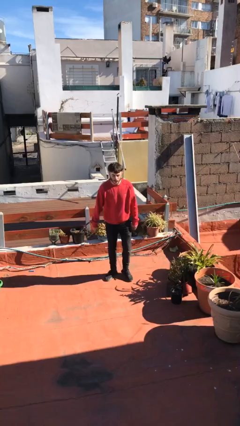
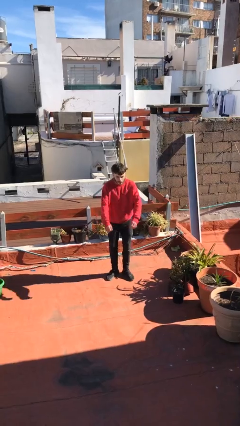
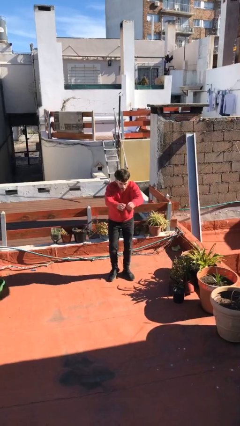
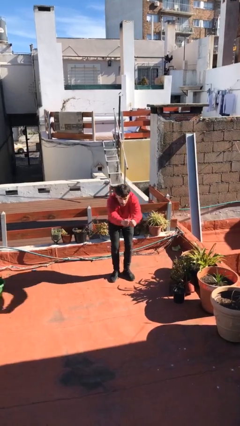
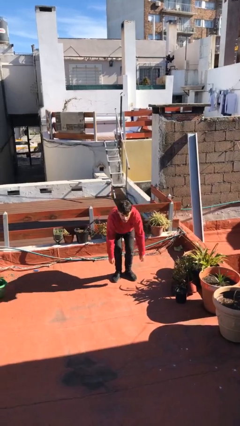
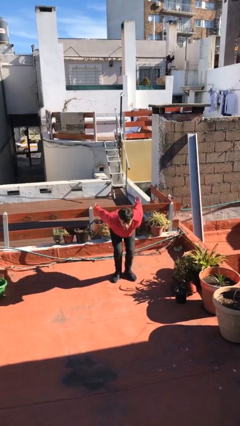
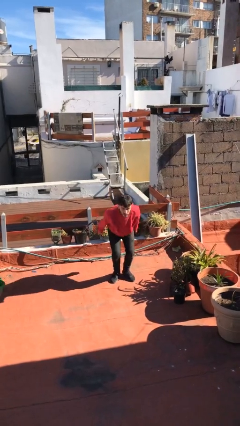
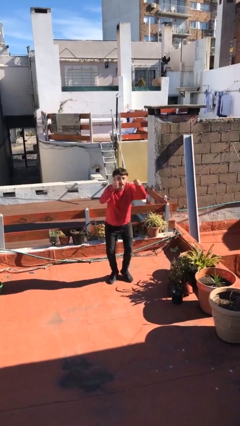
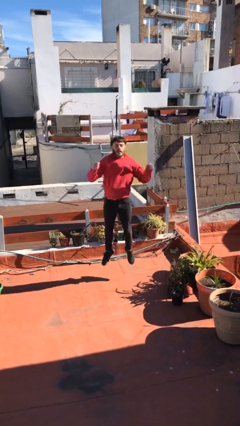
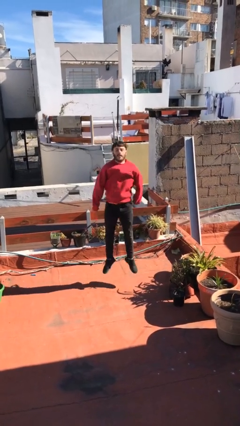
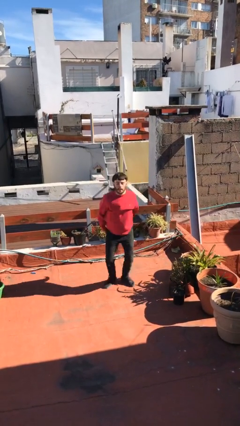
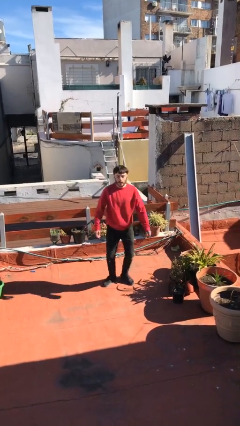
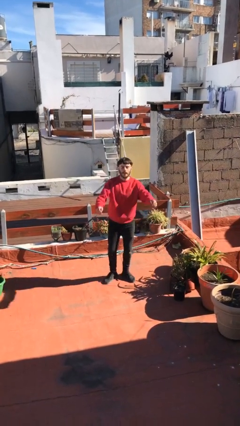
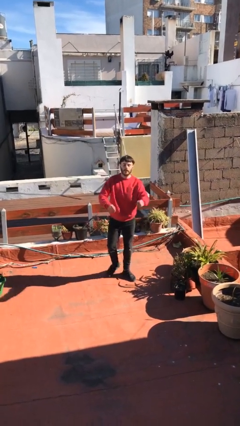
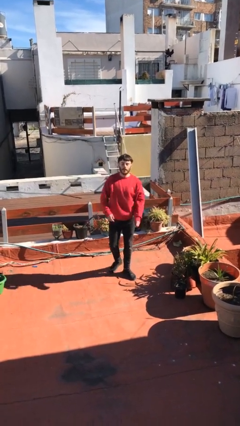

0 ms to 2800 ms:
person jumps

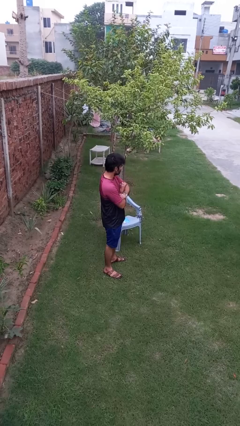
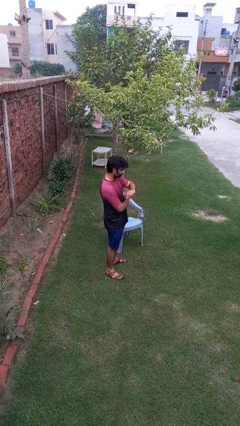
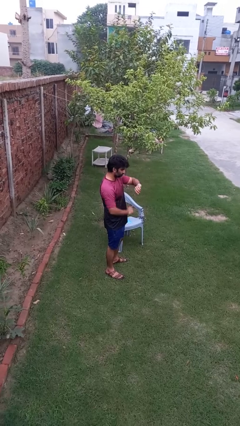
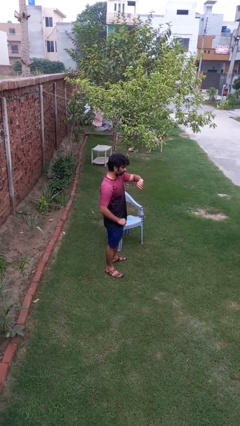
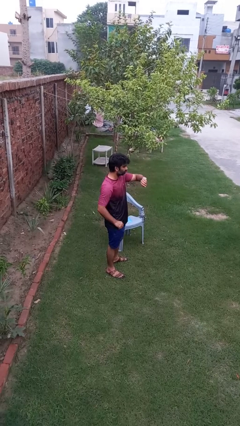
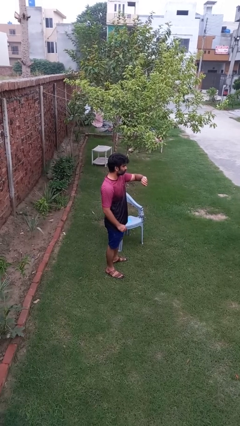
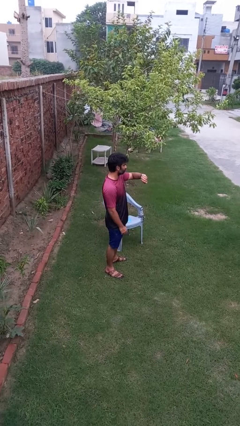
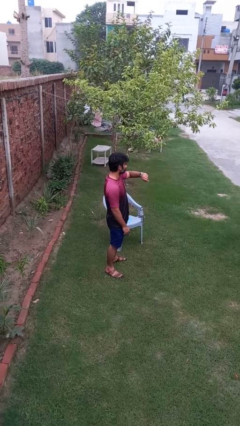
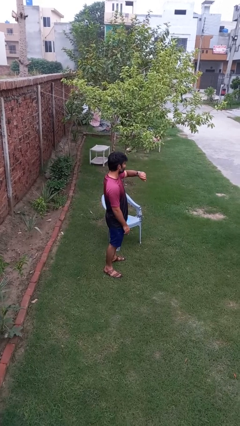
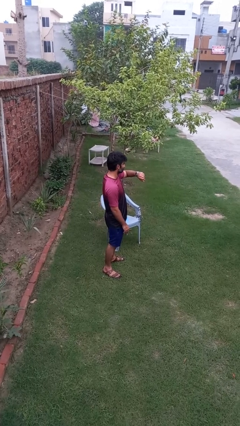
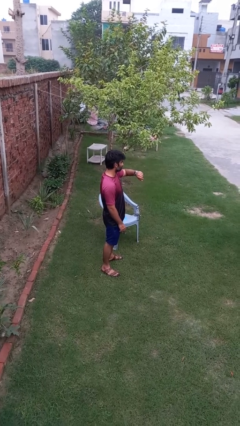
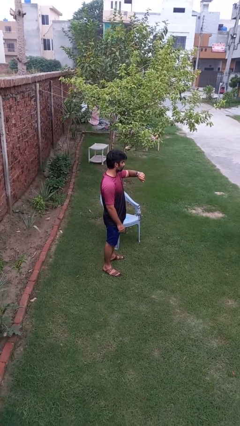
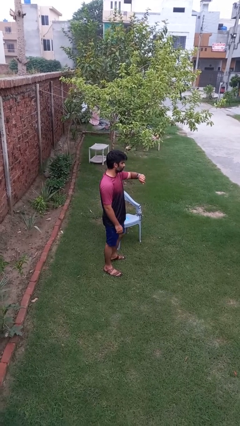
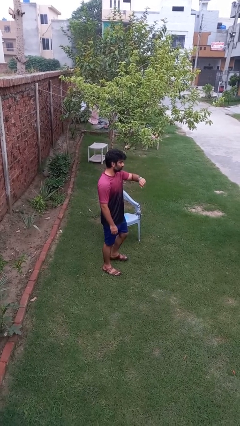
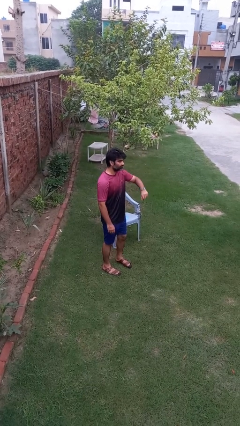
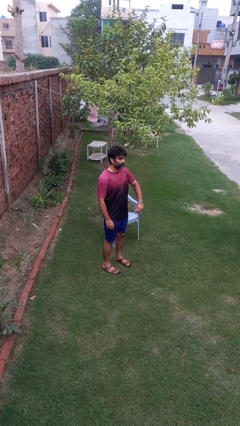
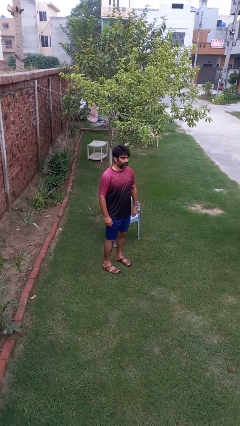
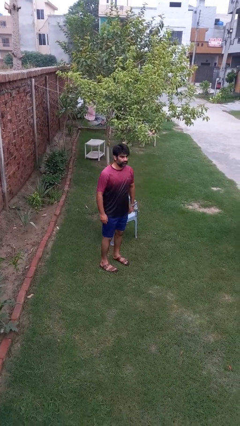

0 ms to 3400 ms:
person looks at wristwatch

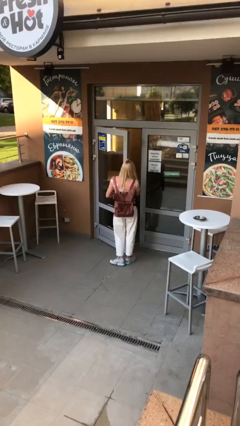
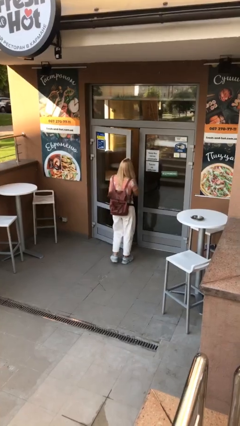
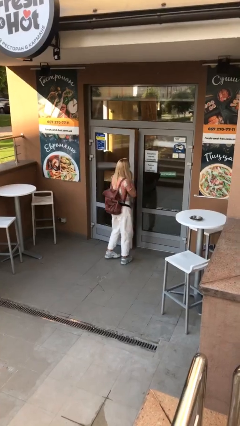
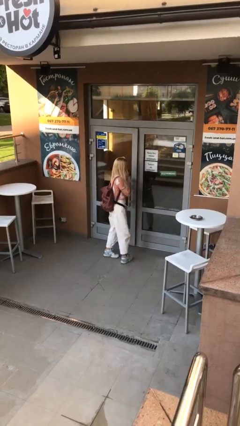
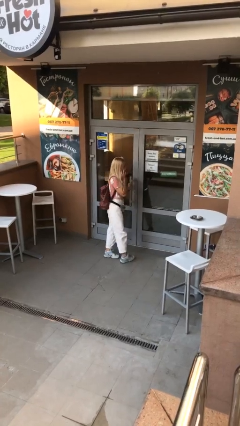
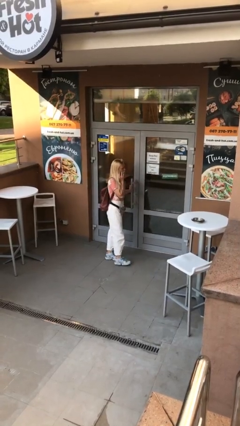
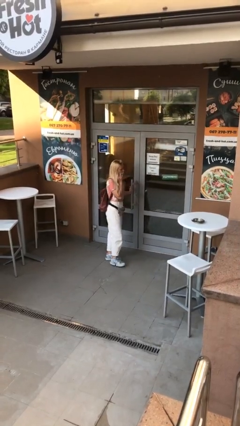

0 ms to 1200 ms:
person closes facility door

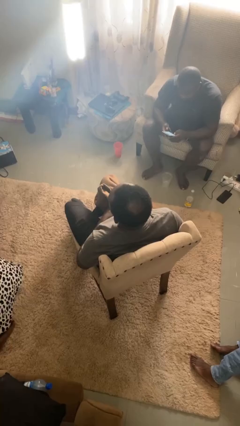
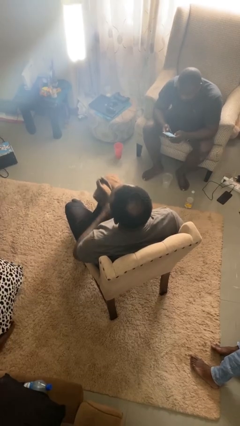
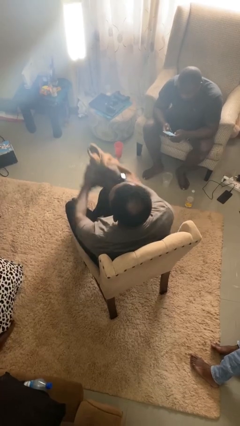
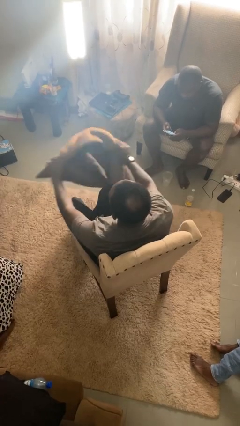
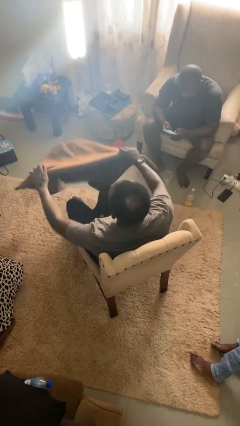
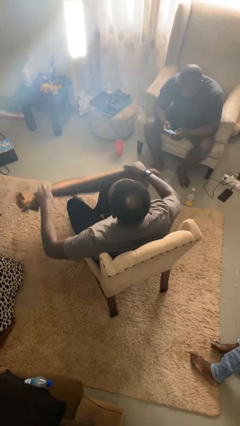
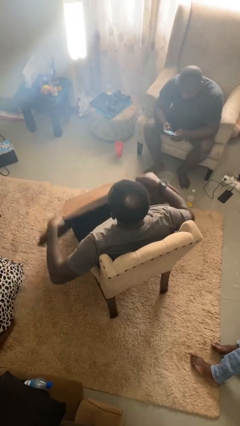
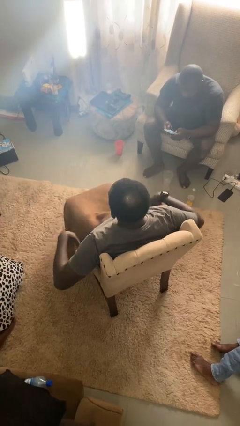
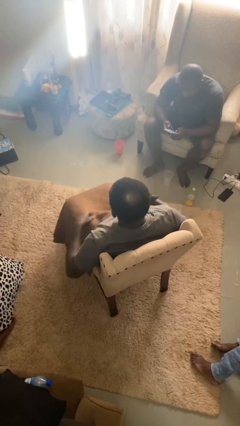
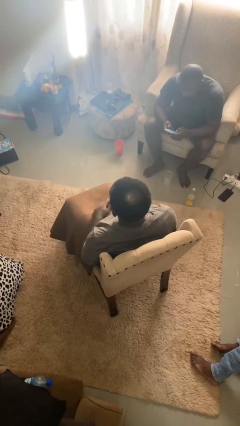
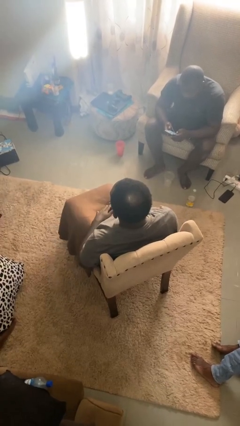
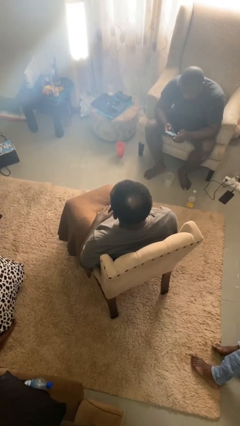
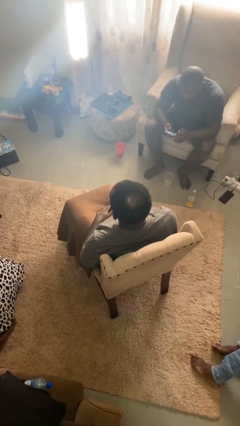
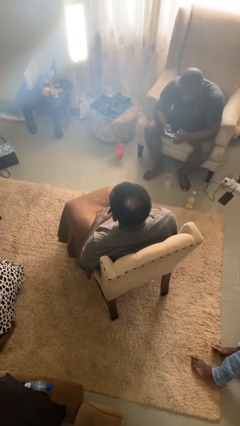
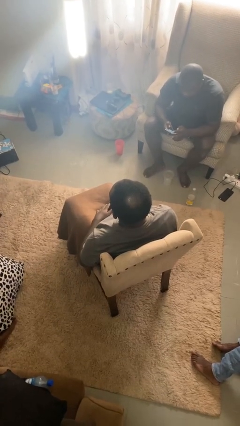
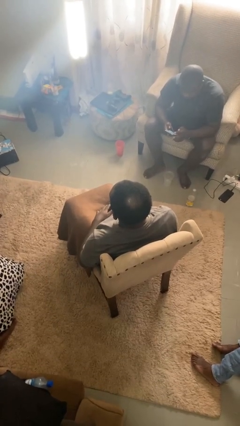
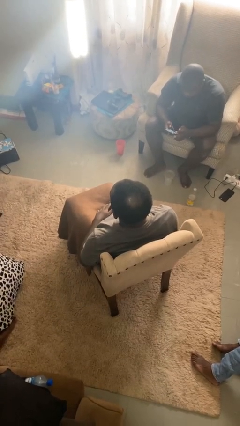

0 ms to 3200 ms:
person covers with blanket

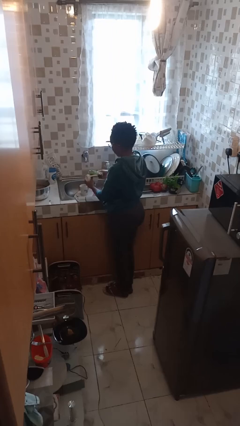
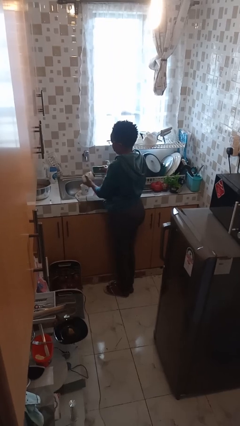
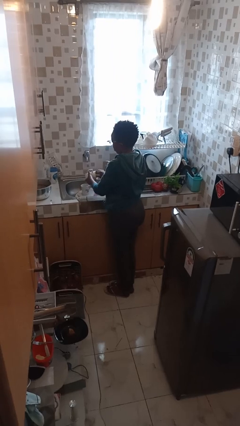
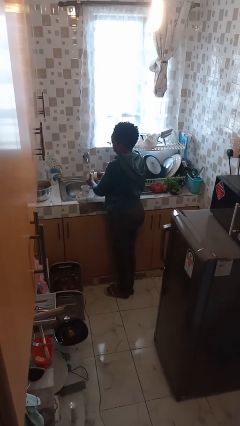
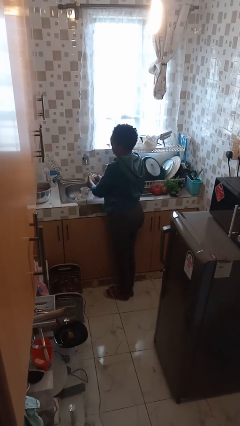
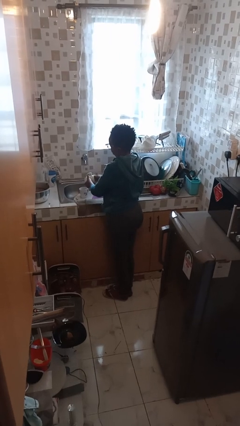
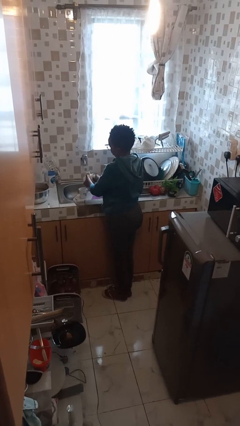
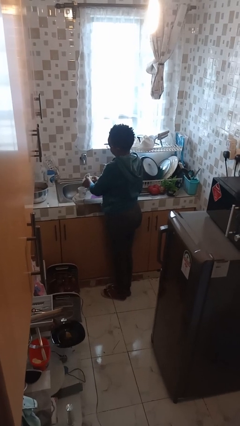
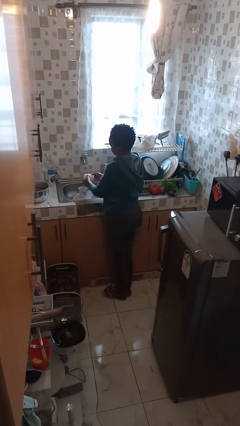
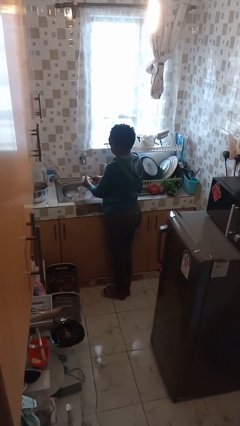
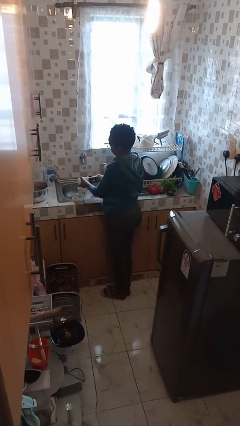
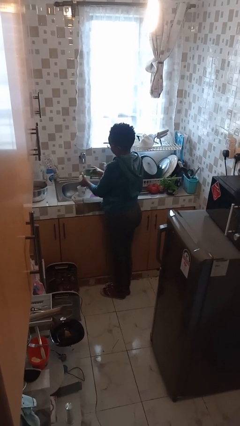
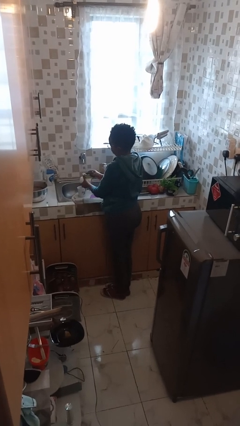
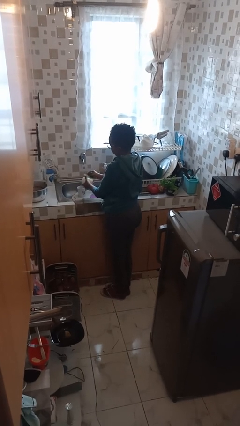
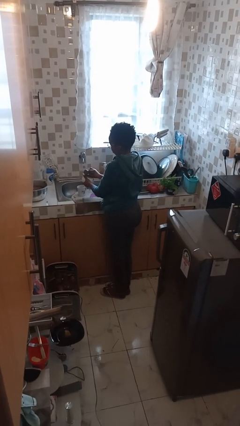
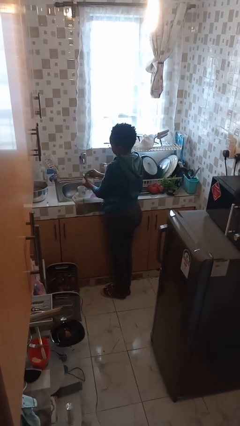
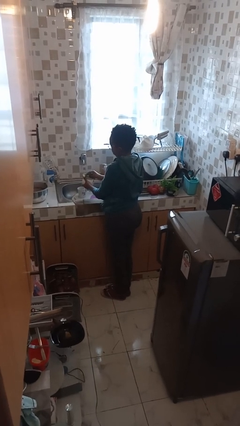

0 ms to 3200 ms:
person washes dish

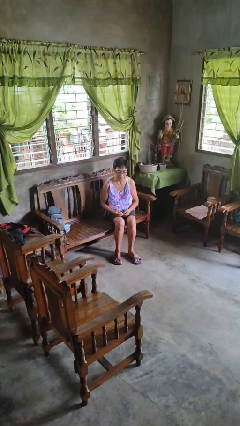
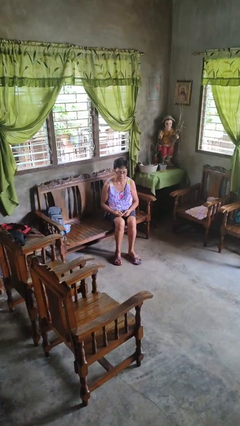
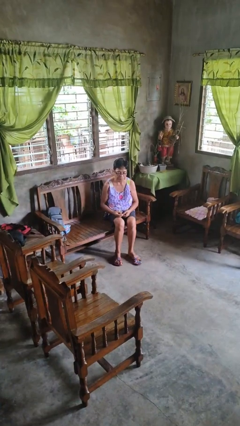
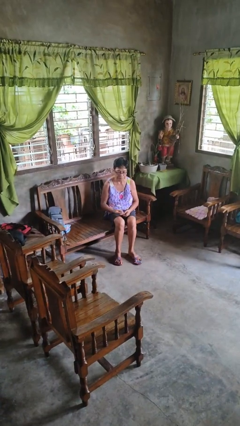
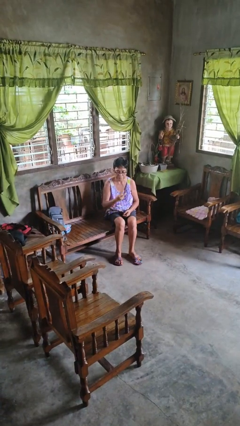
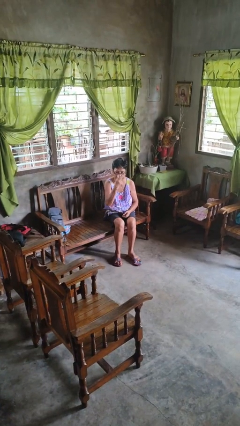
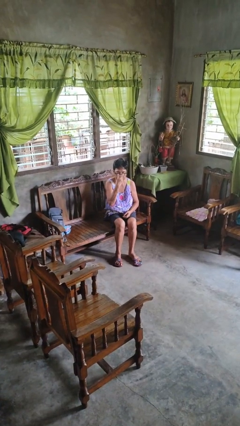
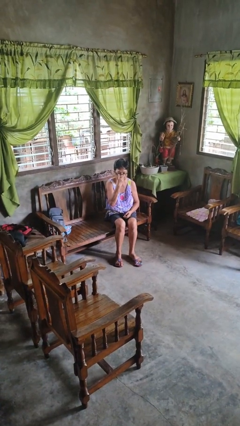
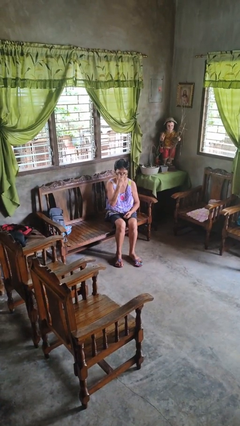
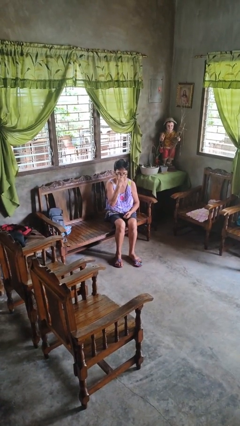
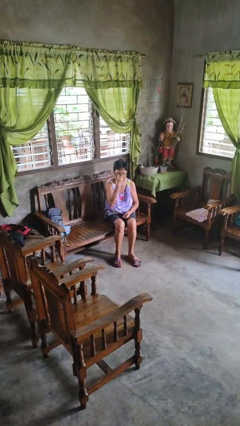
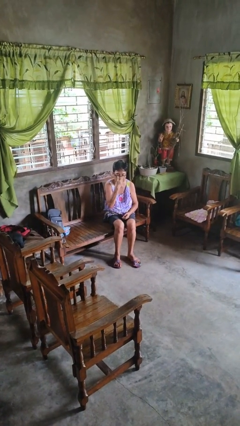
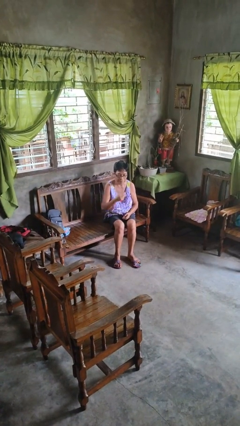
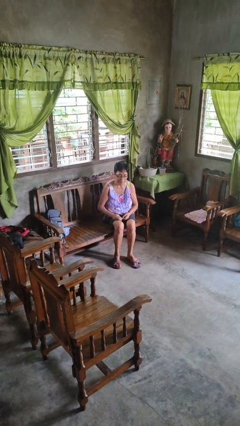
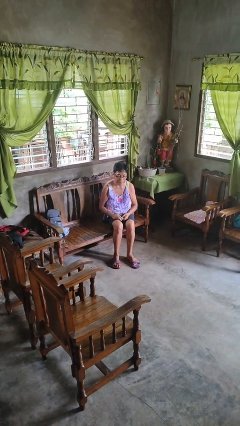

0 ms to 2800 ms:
person gestures watch closely

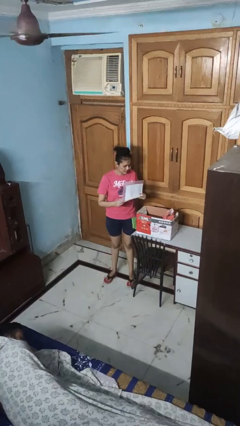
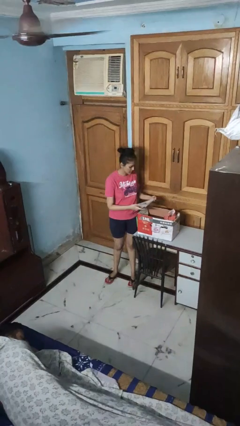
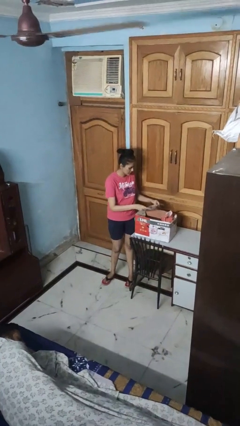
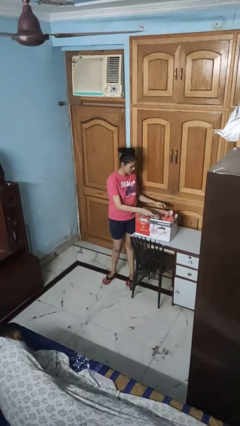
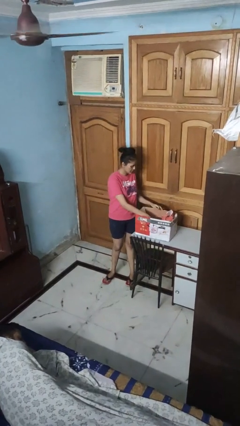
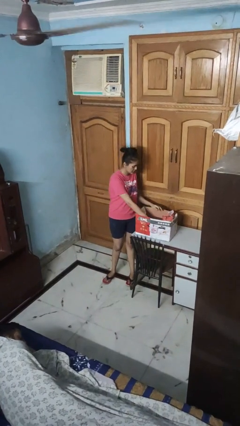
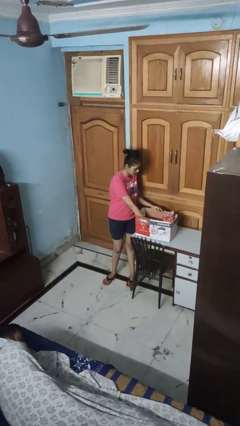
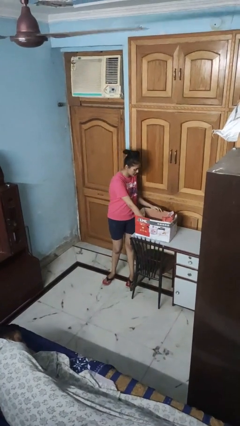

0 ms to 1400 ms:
person puts object into box
